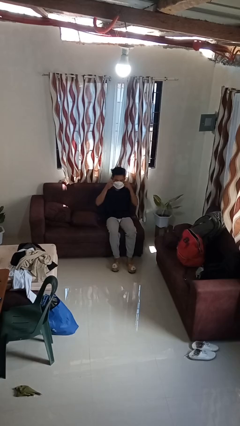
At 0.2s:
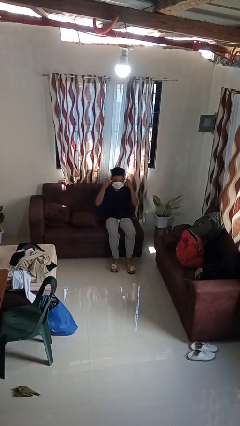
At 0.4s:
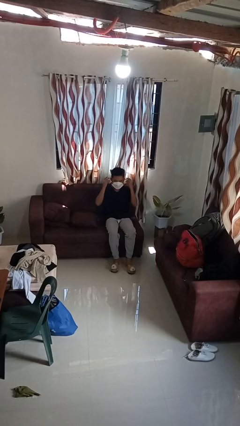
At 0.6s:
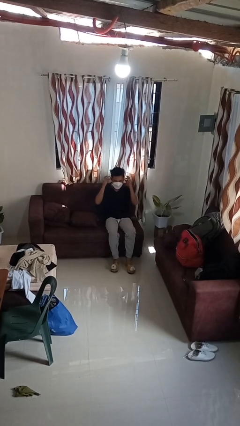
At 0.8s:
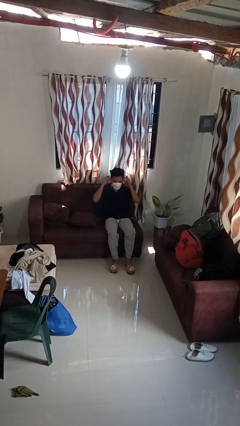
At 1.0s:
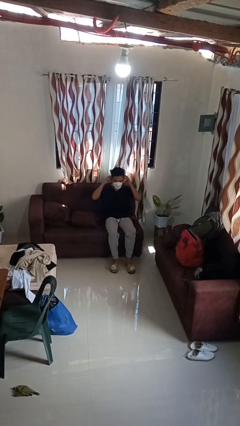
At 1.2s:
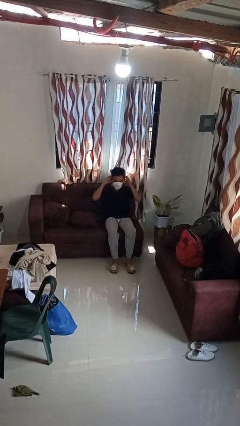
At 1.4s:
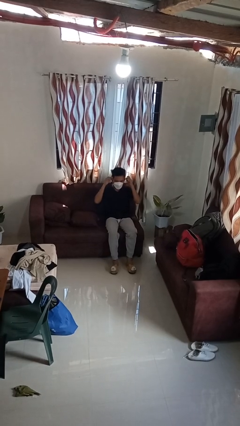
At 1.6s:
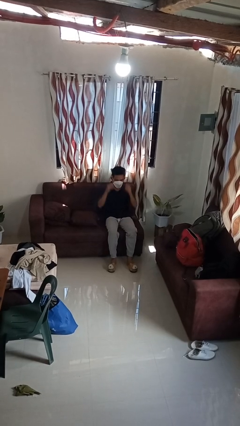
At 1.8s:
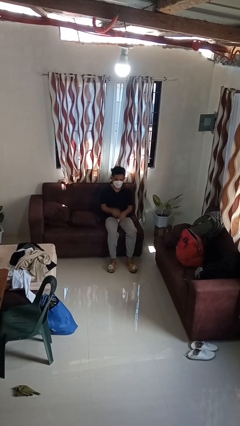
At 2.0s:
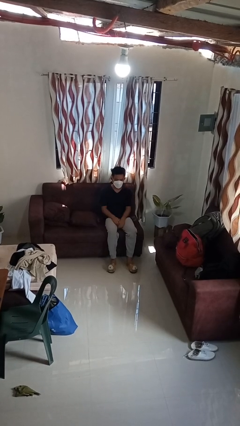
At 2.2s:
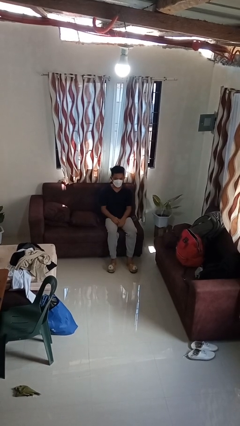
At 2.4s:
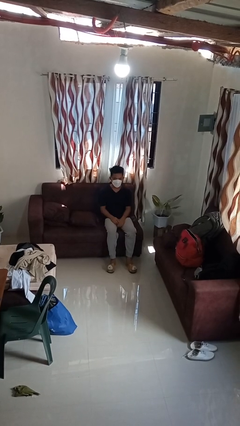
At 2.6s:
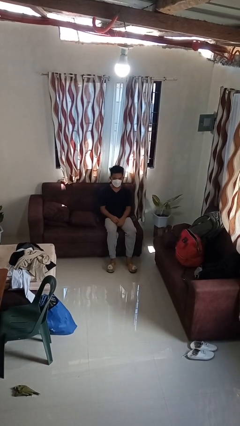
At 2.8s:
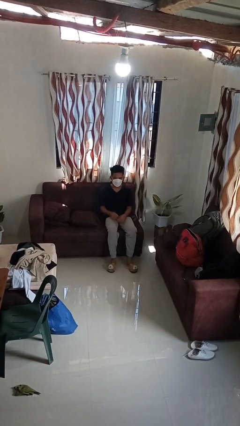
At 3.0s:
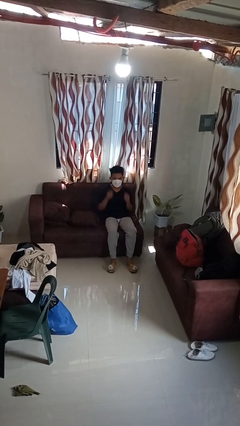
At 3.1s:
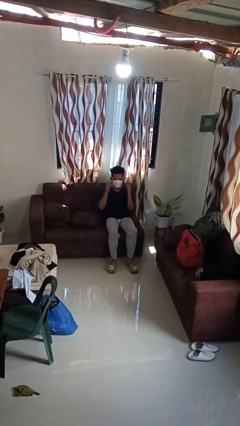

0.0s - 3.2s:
person puts on facemask

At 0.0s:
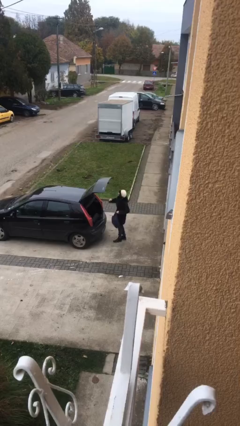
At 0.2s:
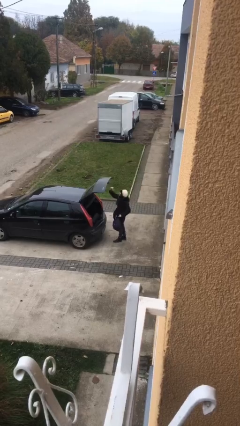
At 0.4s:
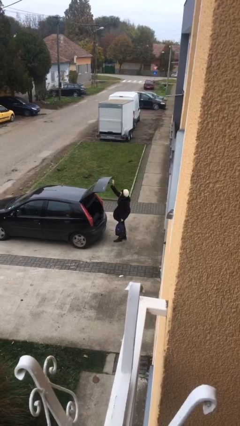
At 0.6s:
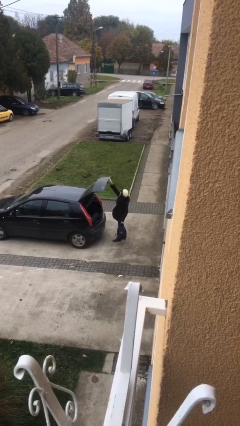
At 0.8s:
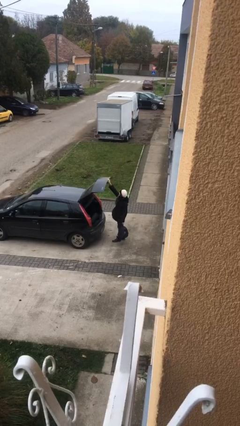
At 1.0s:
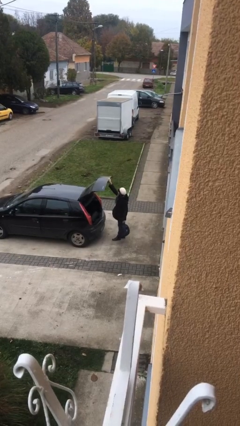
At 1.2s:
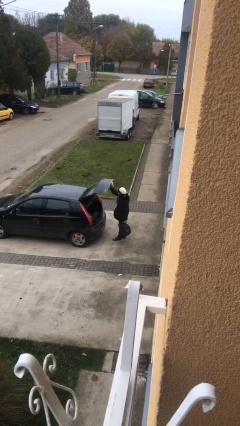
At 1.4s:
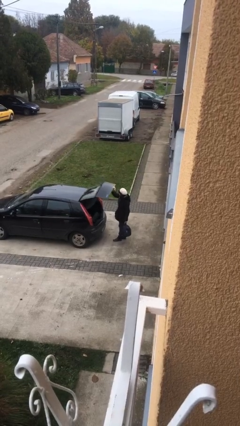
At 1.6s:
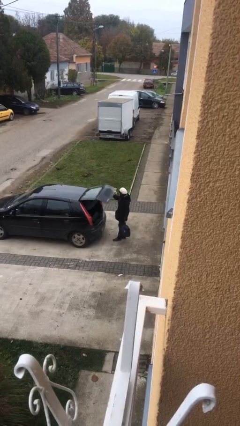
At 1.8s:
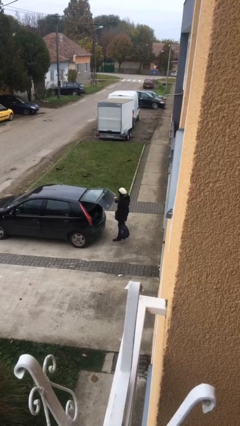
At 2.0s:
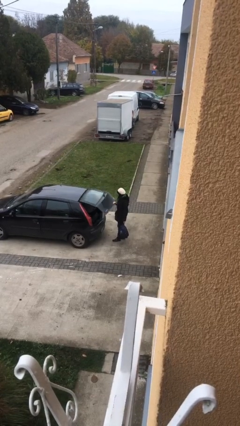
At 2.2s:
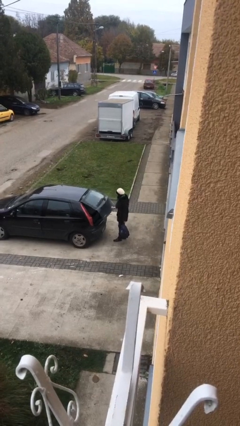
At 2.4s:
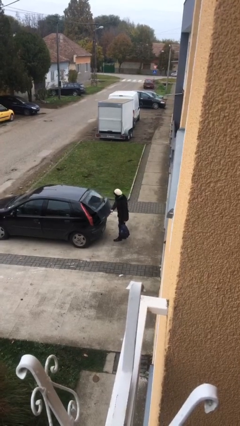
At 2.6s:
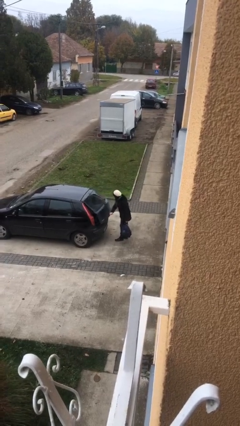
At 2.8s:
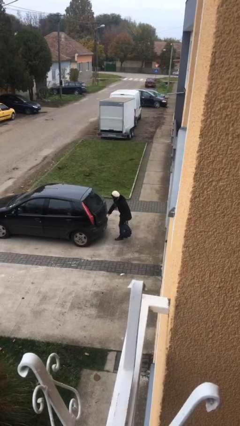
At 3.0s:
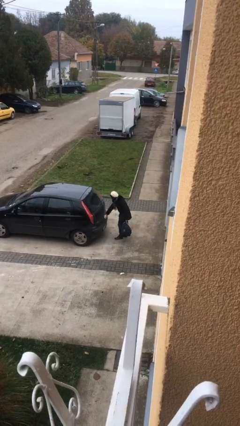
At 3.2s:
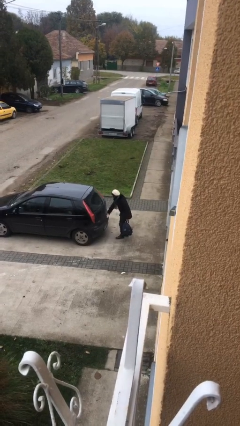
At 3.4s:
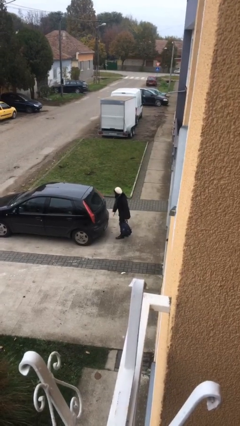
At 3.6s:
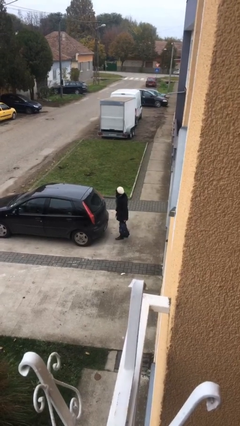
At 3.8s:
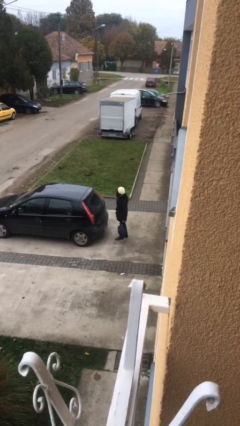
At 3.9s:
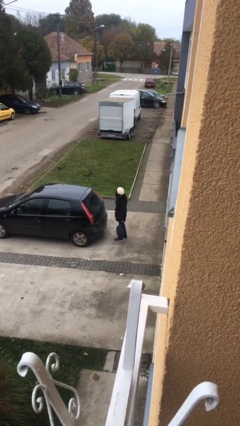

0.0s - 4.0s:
person closes car trunk

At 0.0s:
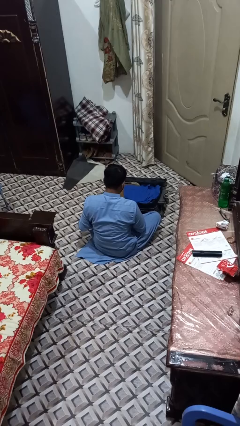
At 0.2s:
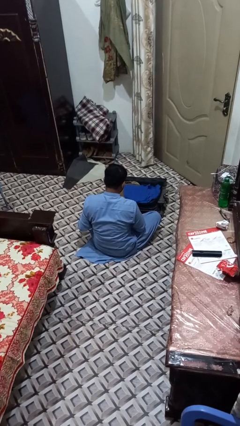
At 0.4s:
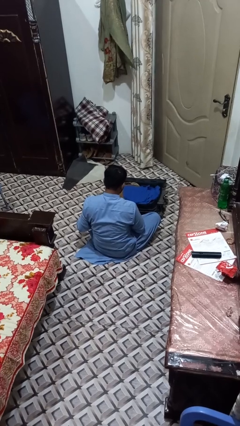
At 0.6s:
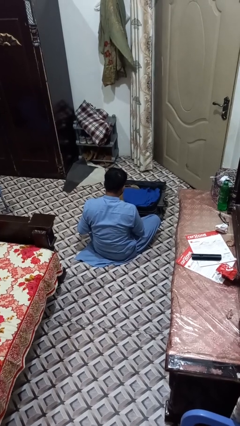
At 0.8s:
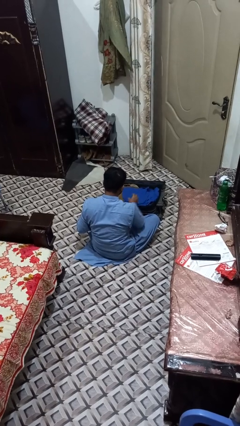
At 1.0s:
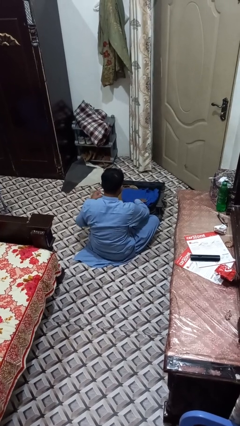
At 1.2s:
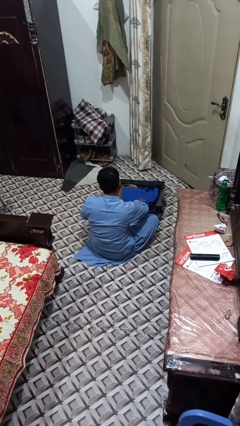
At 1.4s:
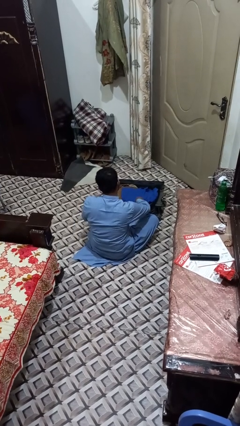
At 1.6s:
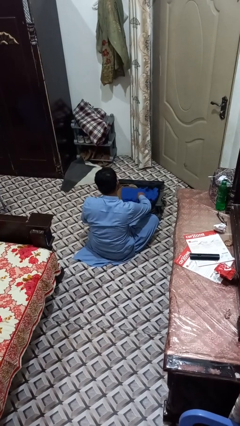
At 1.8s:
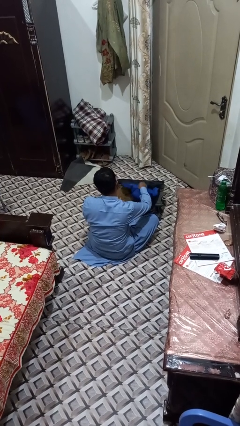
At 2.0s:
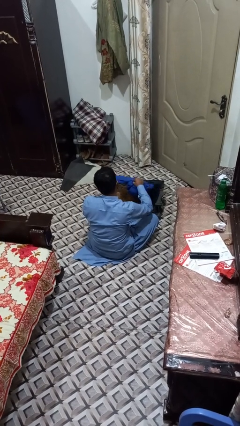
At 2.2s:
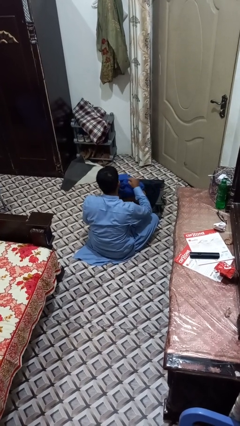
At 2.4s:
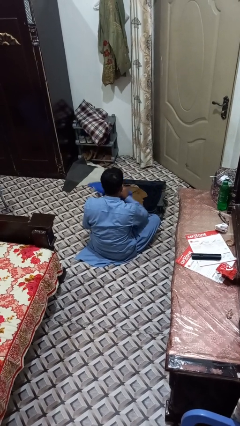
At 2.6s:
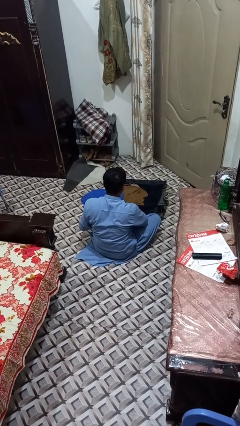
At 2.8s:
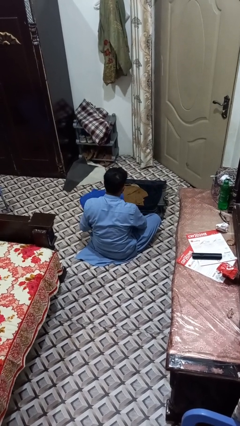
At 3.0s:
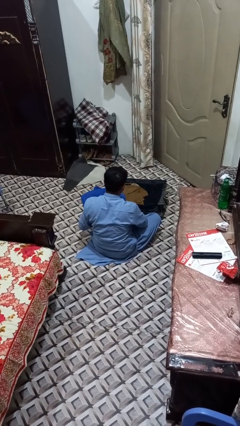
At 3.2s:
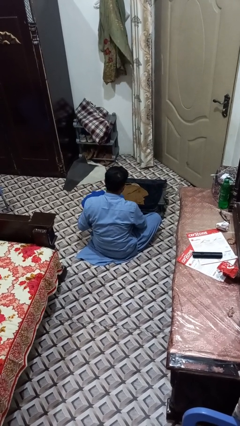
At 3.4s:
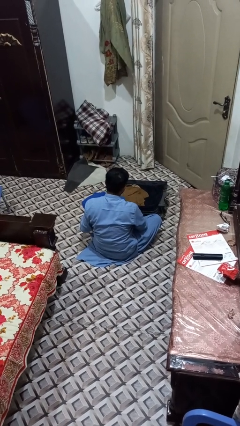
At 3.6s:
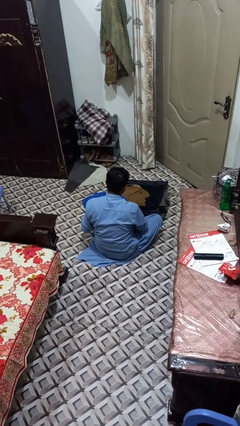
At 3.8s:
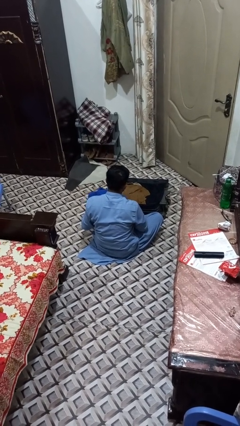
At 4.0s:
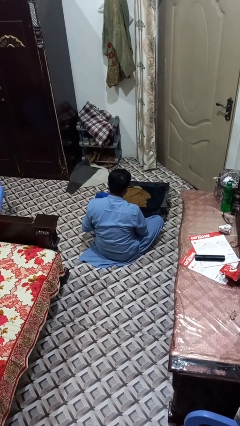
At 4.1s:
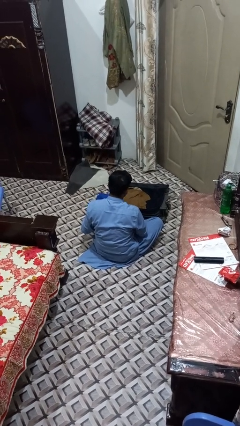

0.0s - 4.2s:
person unloads clothes from suitcase

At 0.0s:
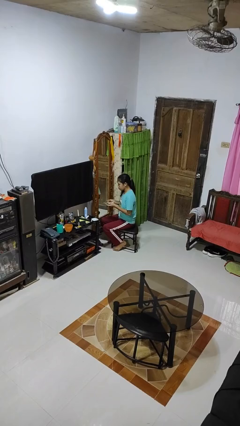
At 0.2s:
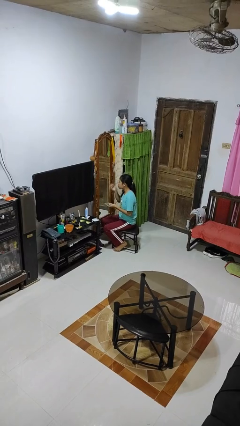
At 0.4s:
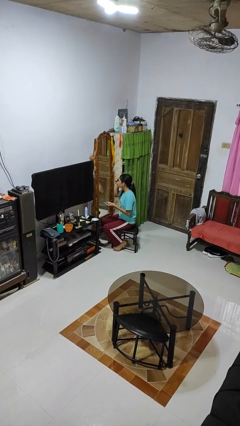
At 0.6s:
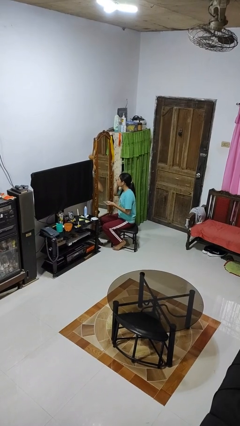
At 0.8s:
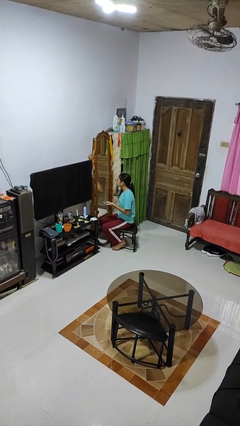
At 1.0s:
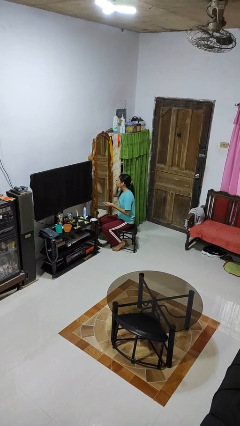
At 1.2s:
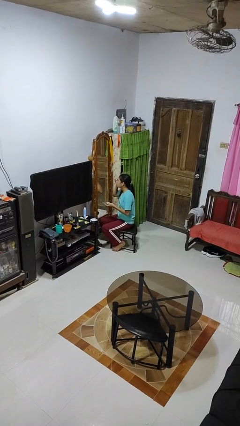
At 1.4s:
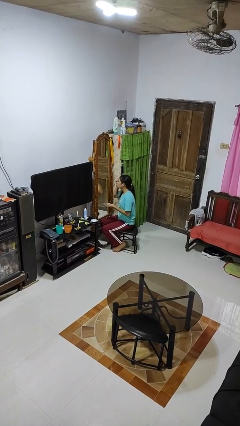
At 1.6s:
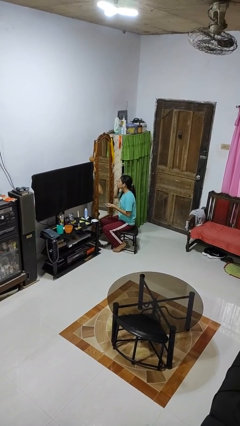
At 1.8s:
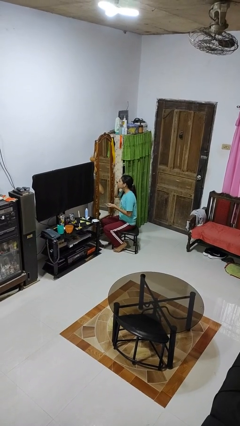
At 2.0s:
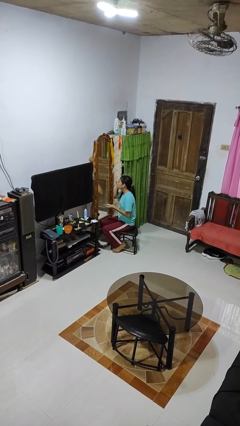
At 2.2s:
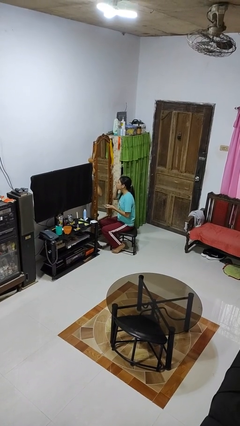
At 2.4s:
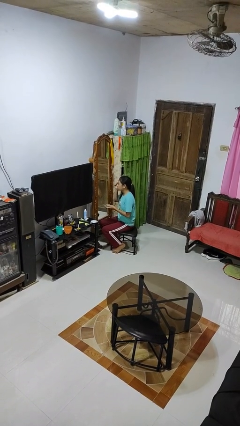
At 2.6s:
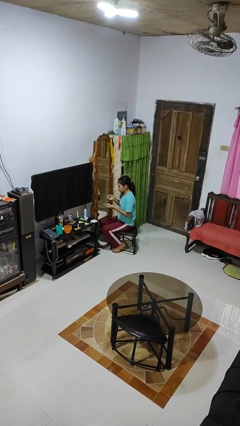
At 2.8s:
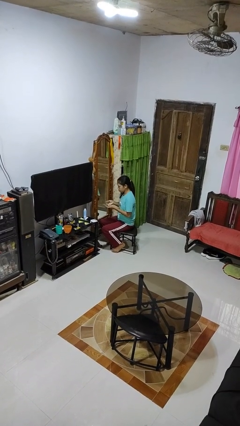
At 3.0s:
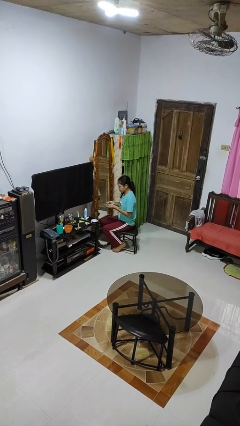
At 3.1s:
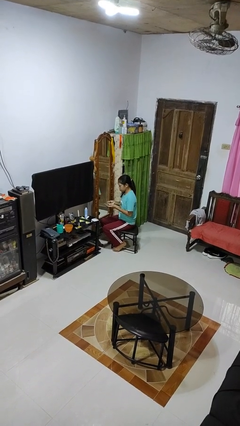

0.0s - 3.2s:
person applies eye makeup

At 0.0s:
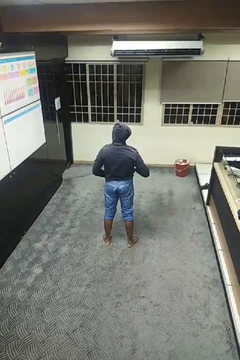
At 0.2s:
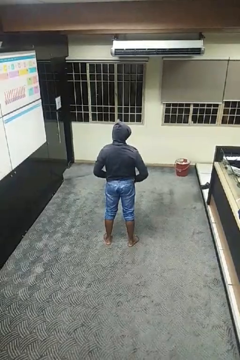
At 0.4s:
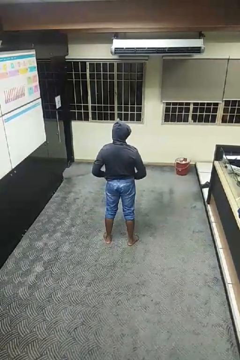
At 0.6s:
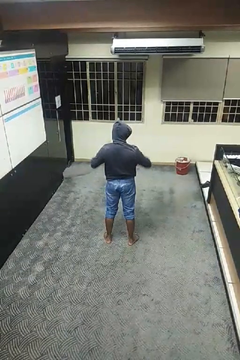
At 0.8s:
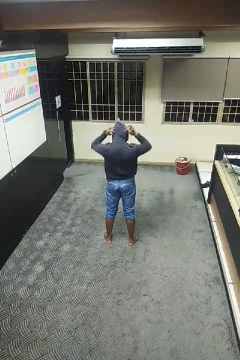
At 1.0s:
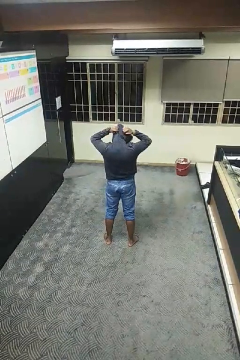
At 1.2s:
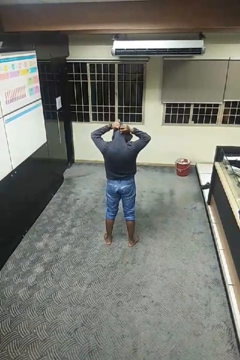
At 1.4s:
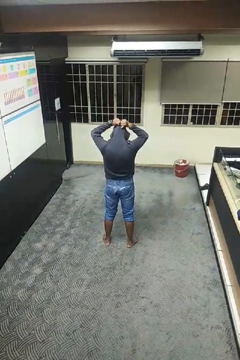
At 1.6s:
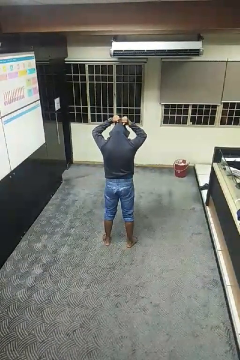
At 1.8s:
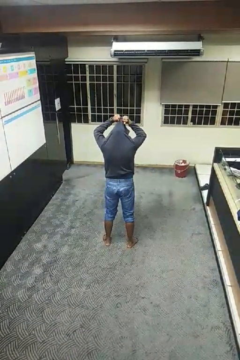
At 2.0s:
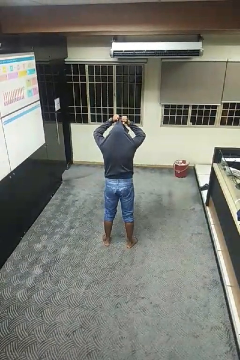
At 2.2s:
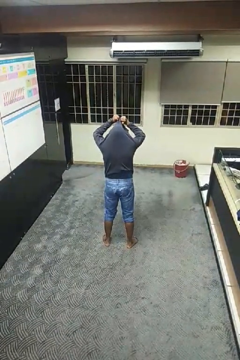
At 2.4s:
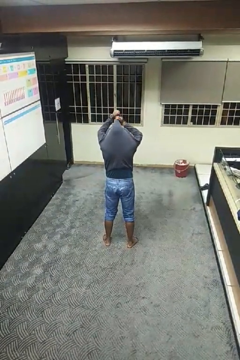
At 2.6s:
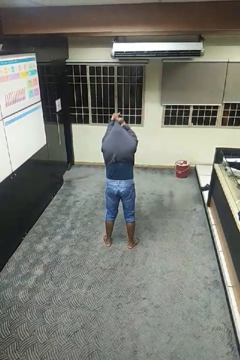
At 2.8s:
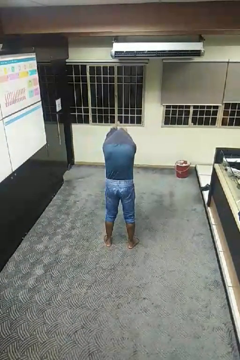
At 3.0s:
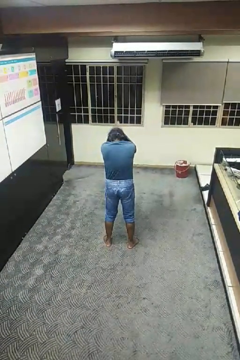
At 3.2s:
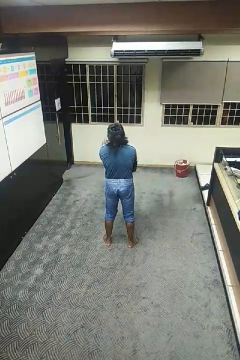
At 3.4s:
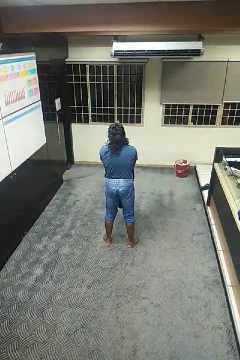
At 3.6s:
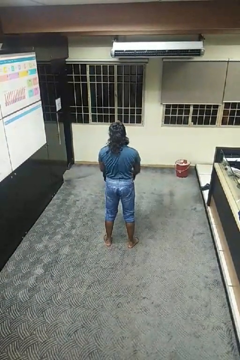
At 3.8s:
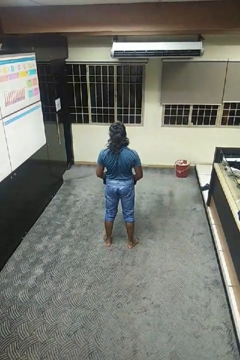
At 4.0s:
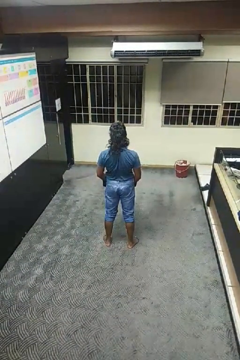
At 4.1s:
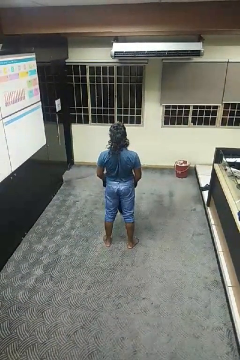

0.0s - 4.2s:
person takes off hoodie

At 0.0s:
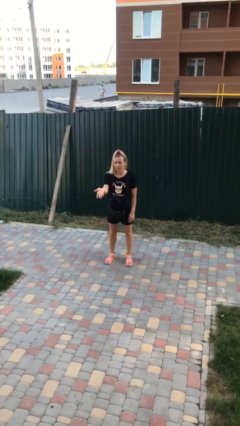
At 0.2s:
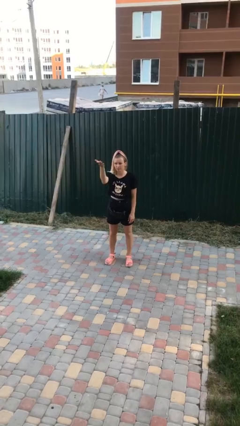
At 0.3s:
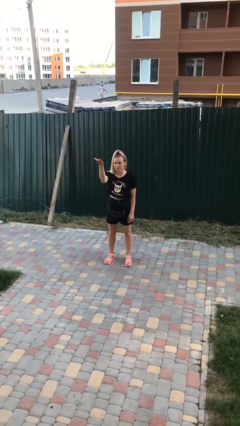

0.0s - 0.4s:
person gestures swipe up
